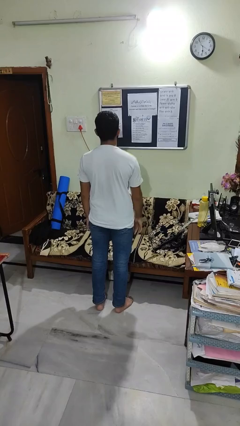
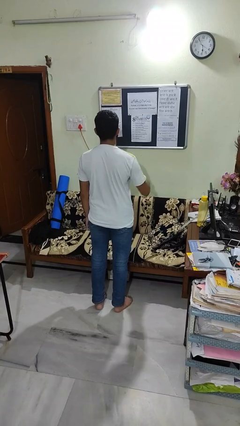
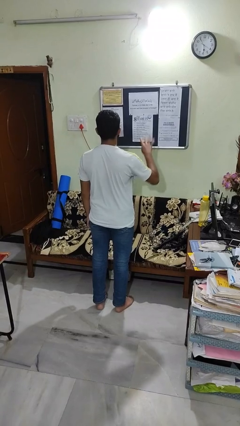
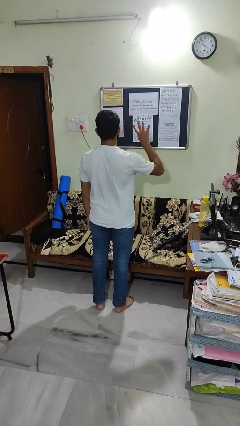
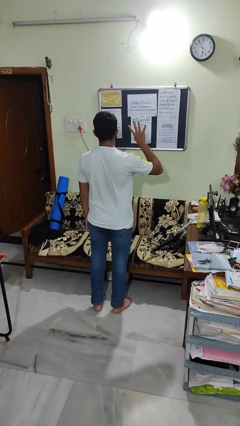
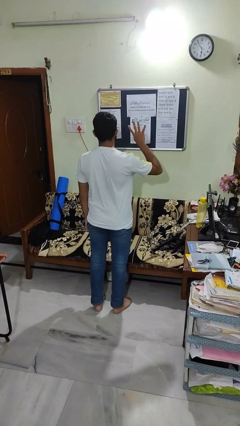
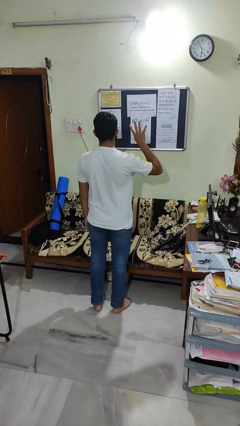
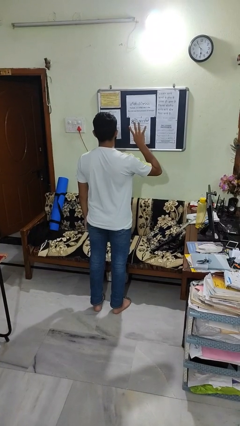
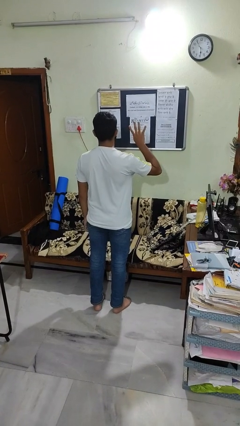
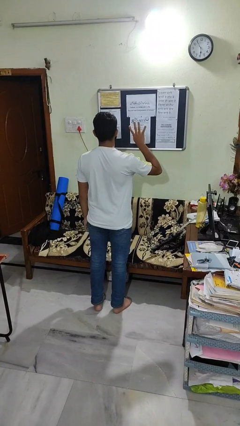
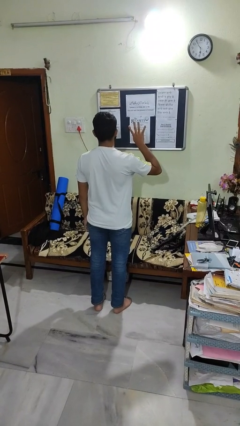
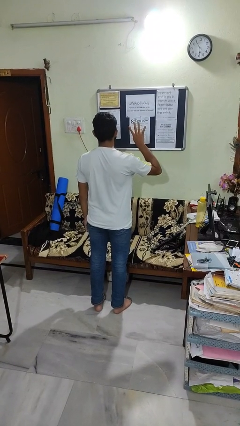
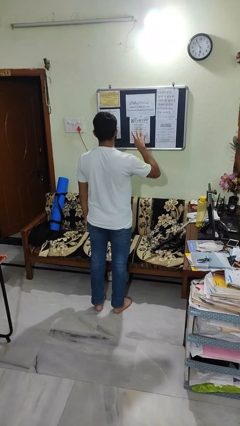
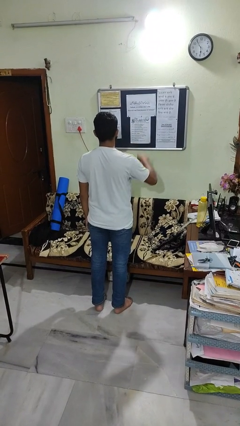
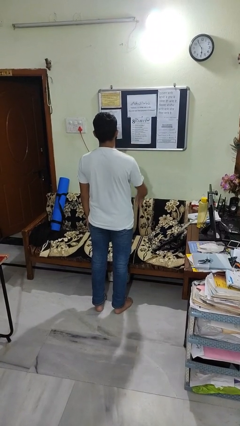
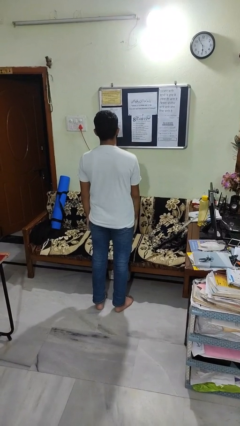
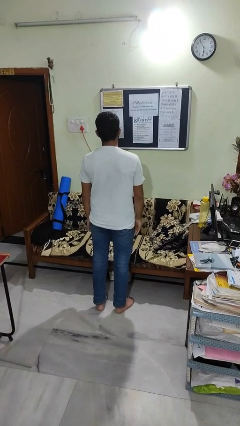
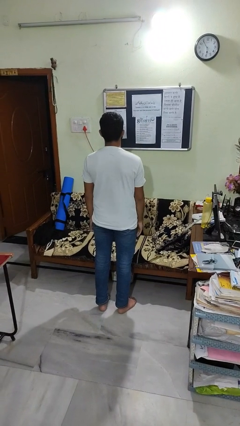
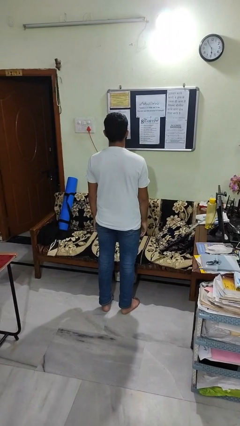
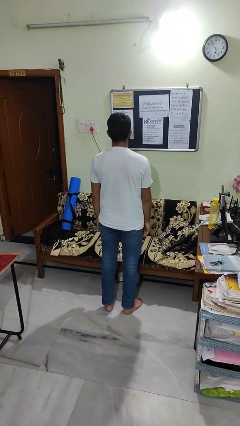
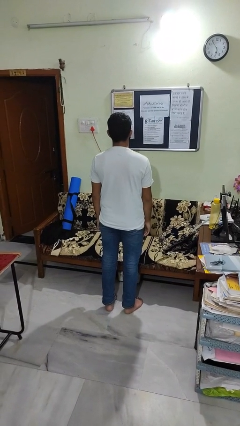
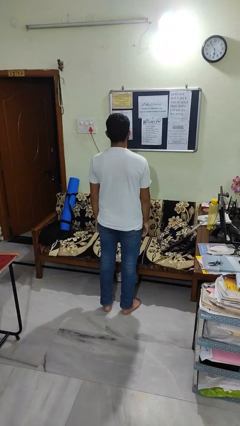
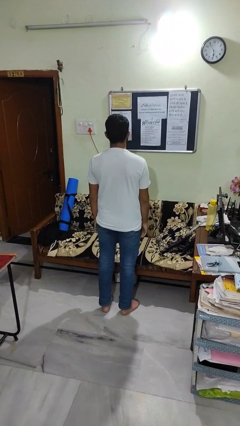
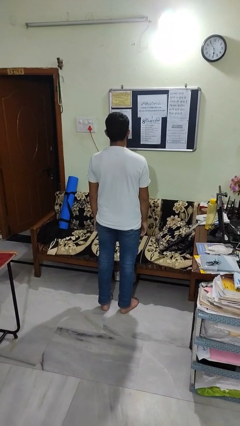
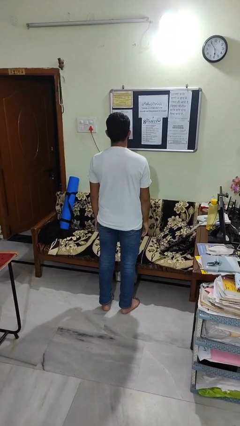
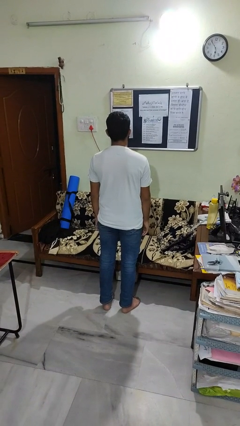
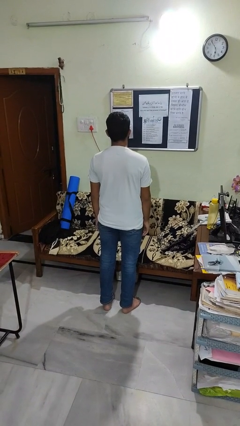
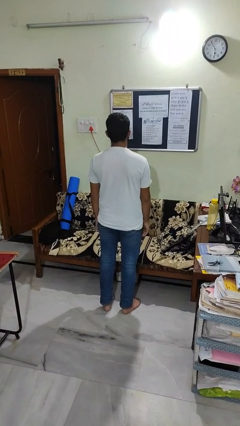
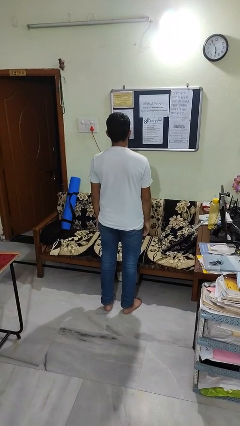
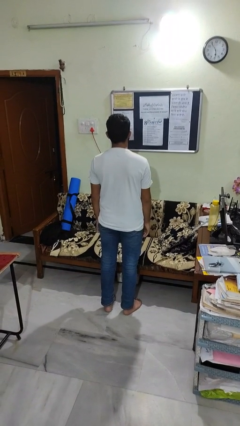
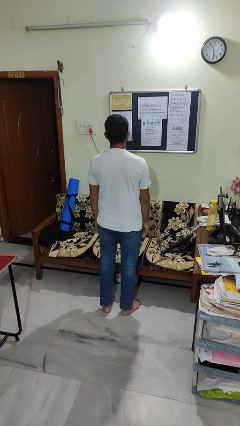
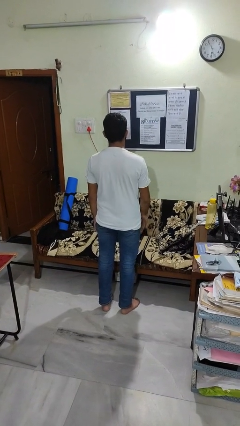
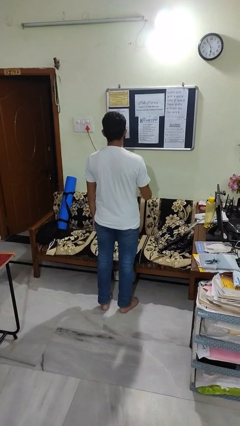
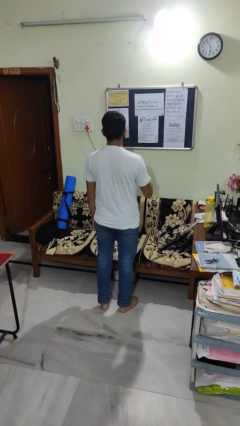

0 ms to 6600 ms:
person gestures number four

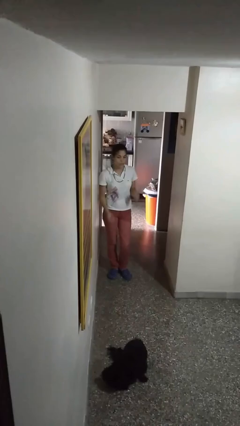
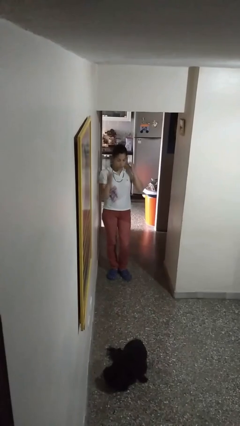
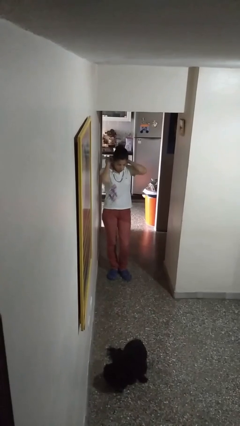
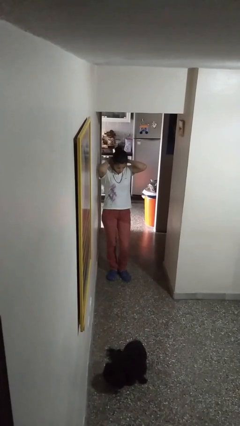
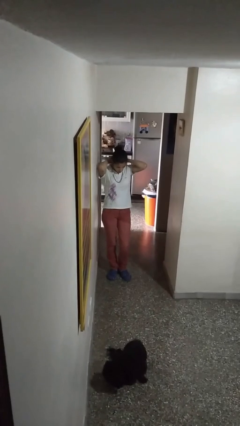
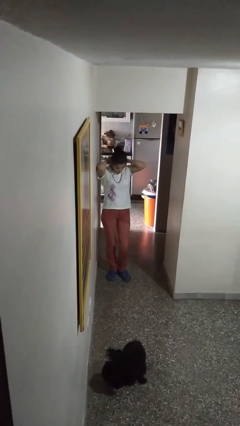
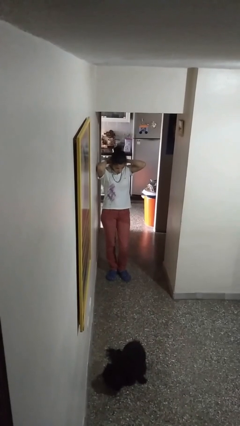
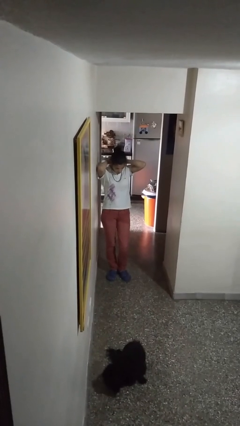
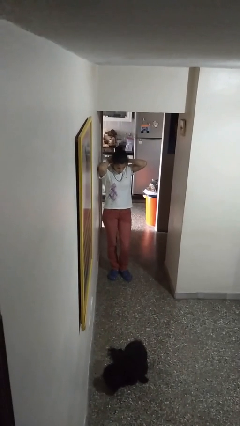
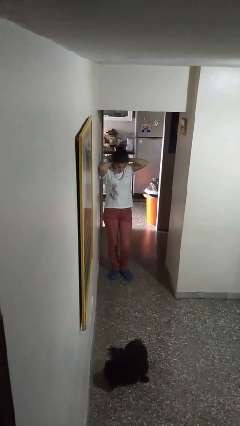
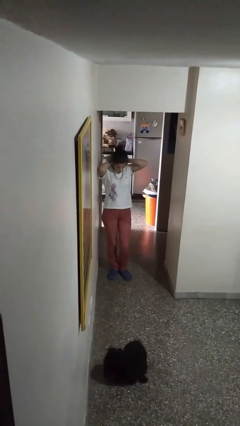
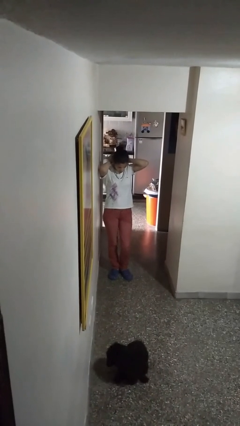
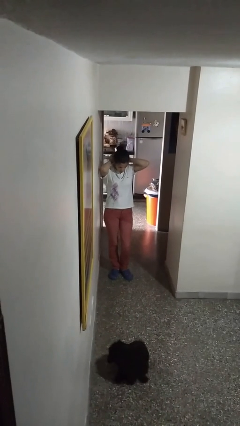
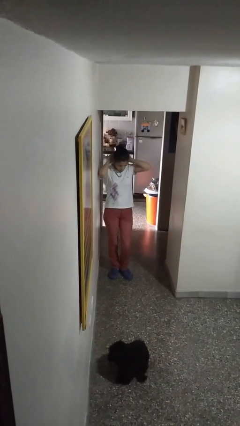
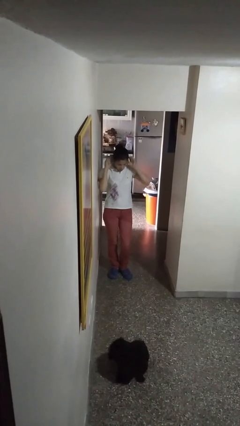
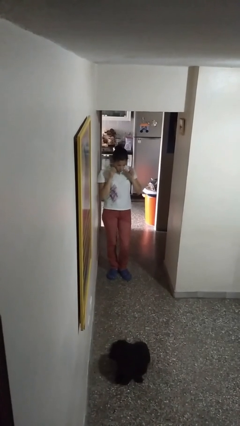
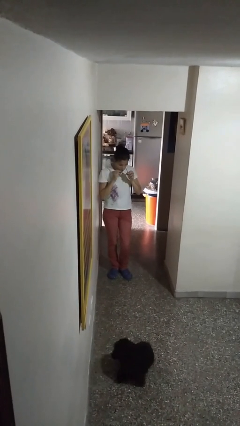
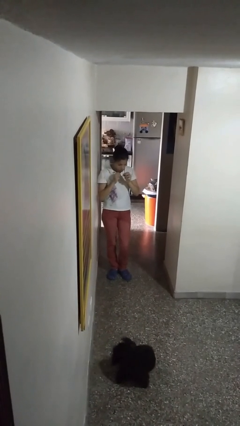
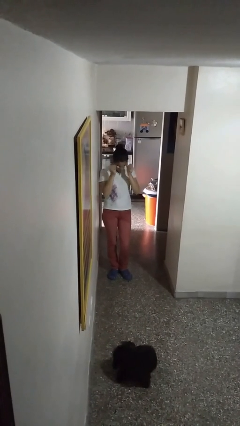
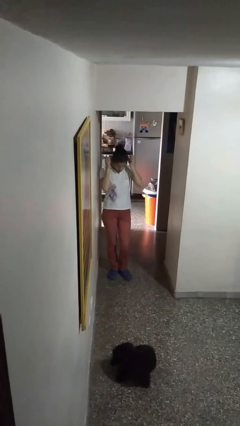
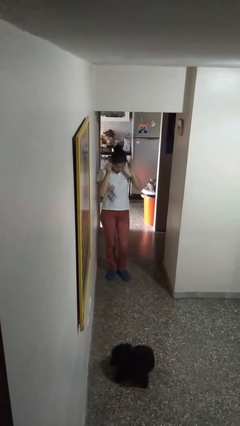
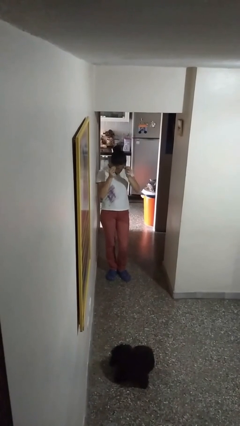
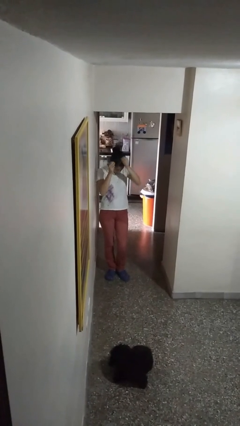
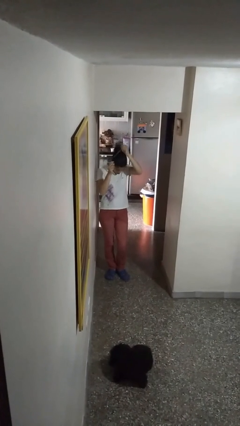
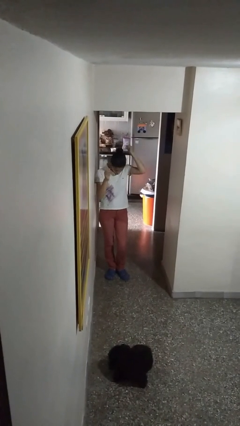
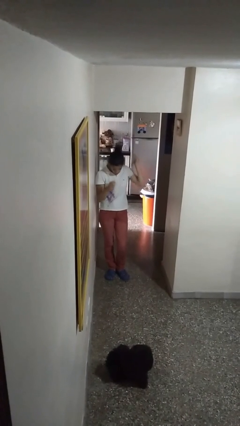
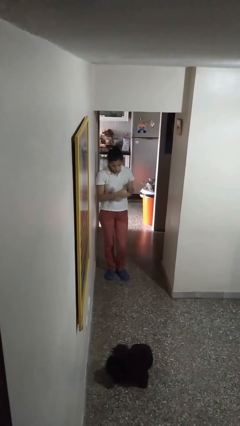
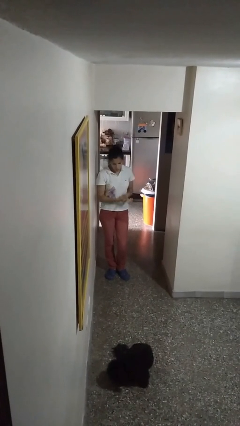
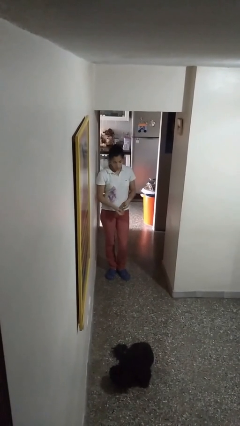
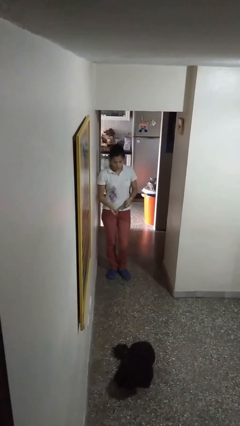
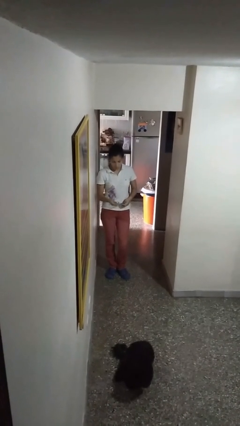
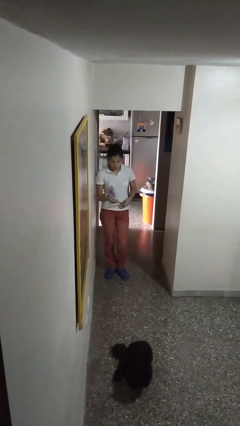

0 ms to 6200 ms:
person takes off necklace

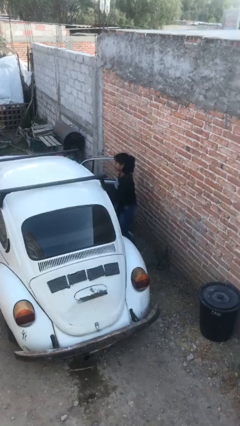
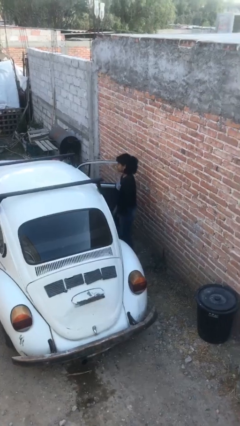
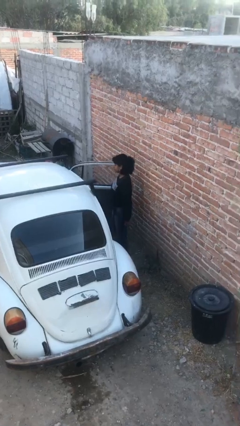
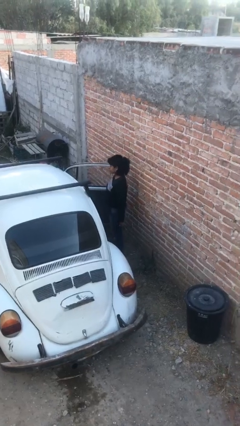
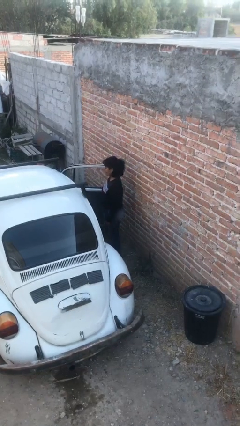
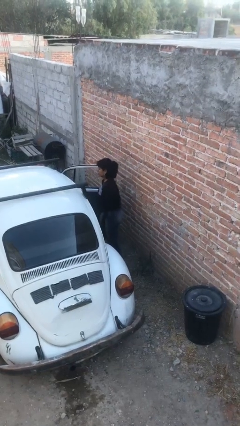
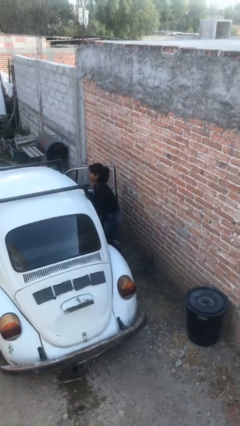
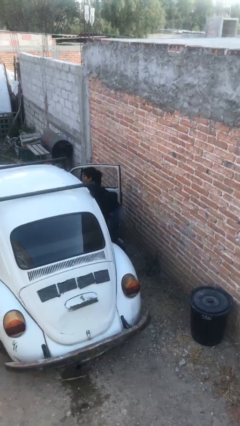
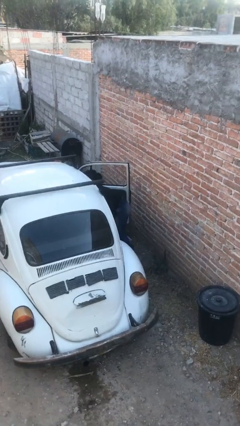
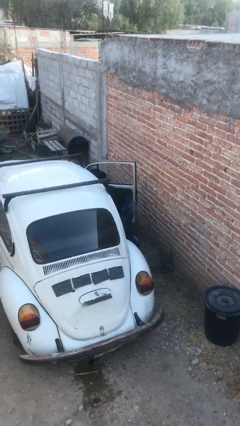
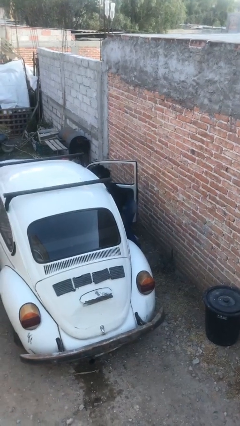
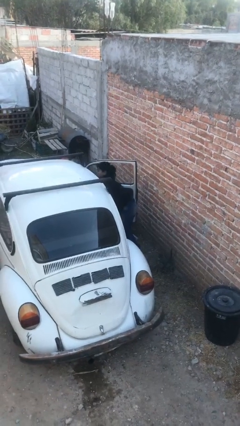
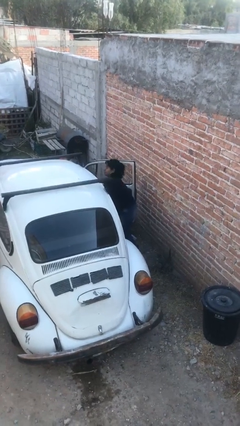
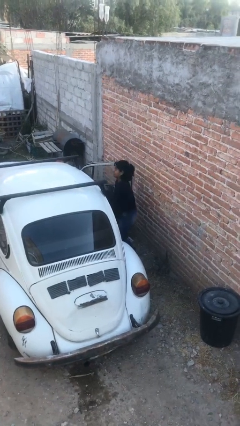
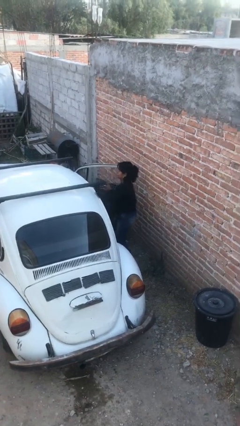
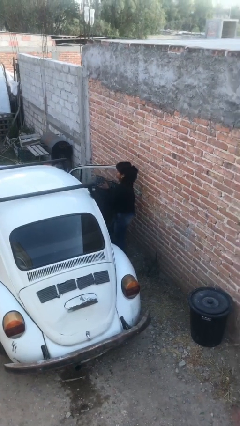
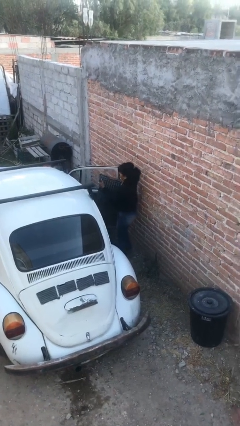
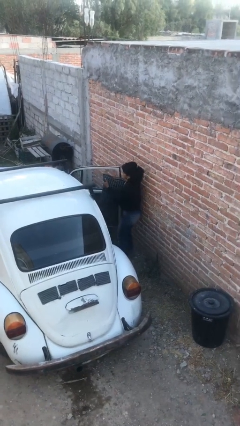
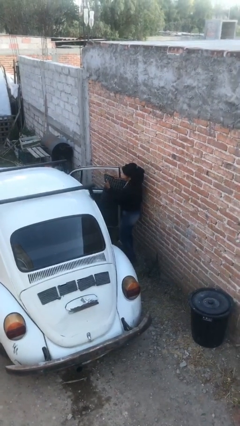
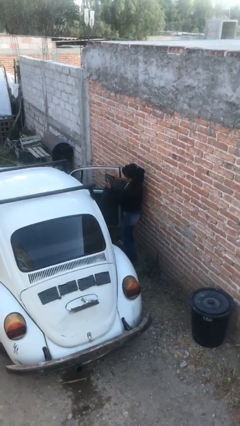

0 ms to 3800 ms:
person unloads car

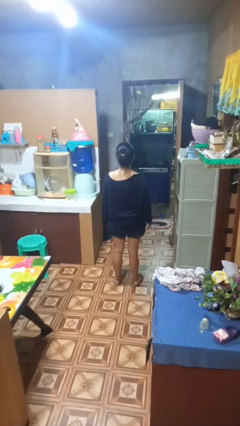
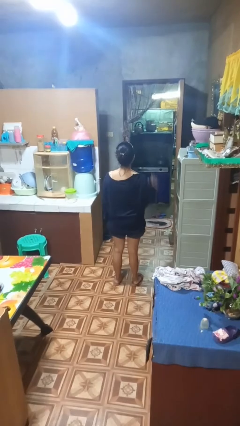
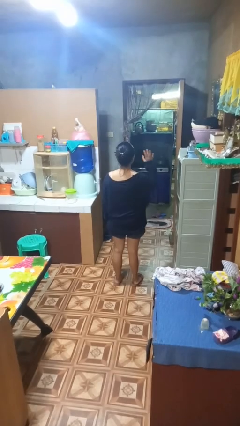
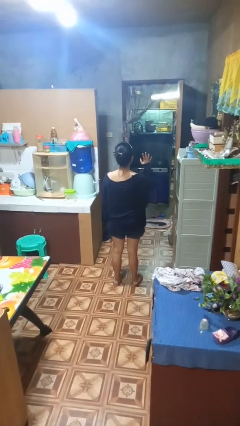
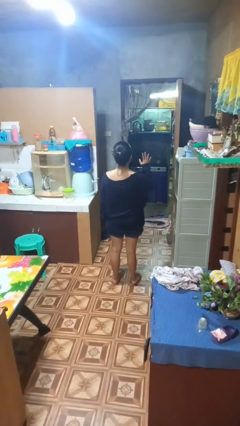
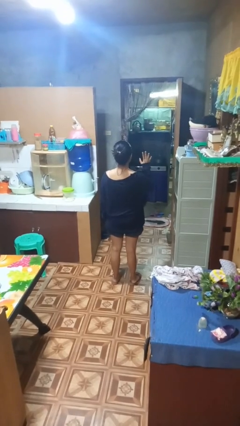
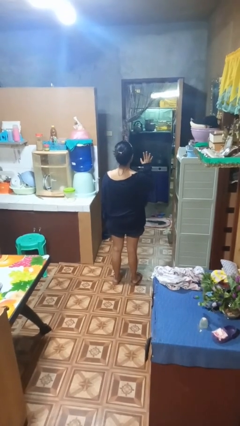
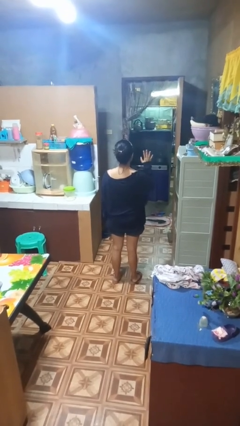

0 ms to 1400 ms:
person gestures number five
